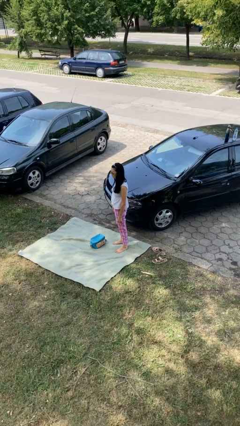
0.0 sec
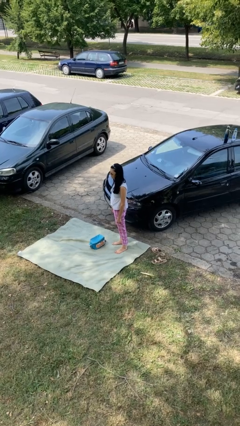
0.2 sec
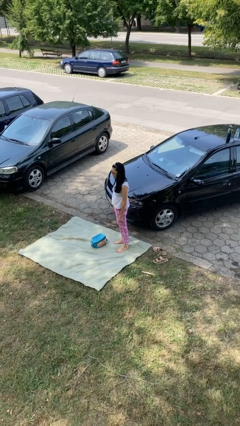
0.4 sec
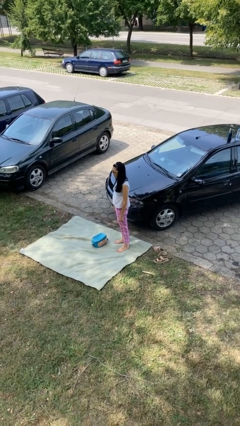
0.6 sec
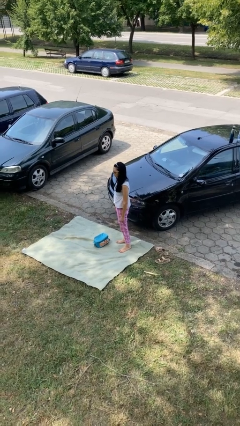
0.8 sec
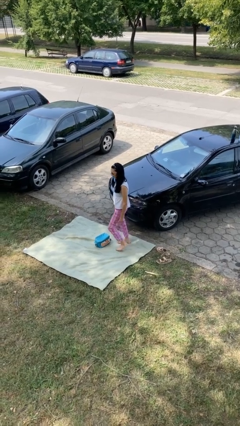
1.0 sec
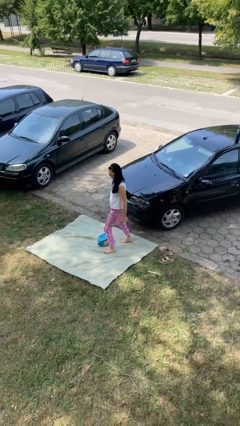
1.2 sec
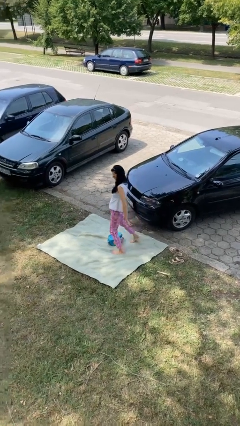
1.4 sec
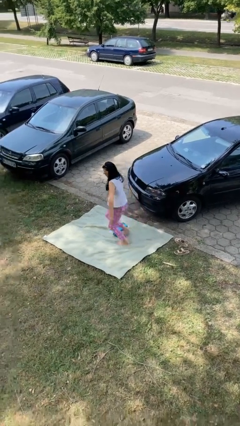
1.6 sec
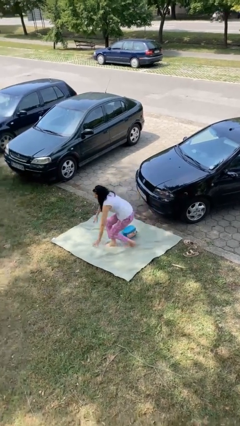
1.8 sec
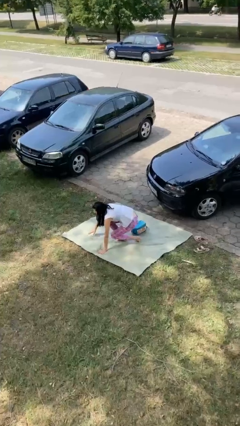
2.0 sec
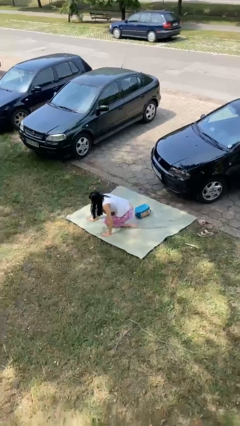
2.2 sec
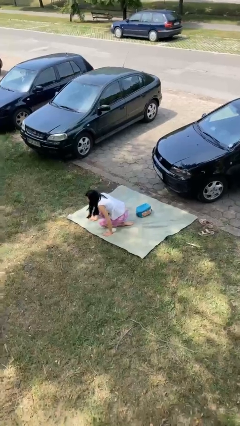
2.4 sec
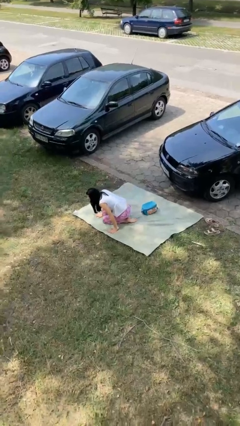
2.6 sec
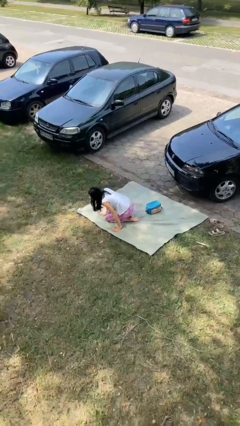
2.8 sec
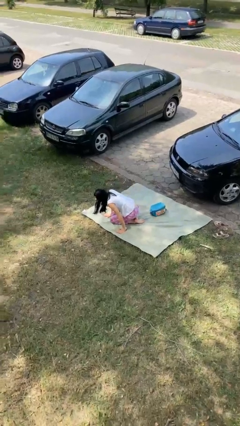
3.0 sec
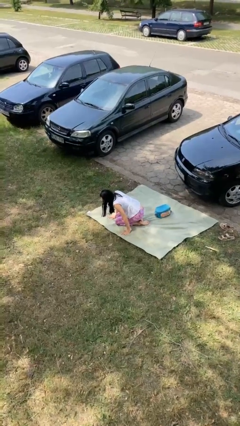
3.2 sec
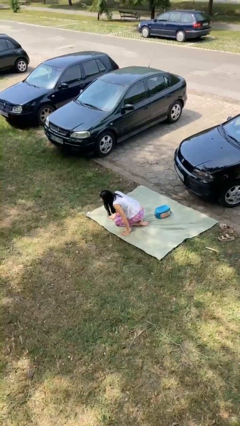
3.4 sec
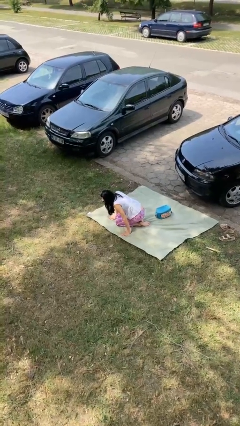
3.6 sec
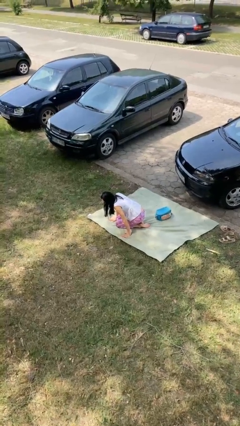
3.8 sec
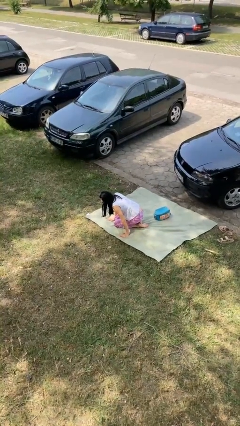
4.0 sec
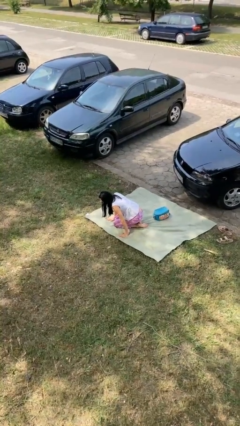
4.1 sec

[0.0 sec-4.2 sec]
person trips on object on floor

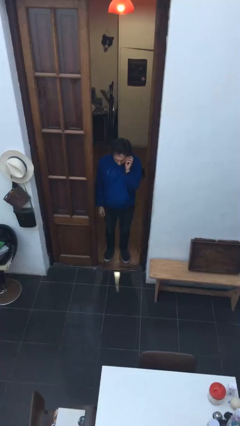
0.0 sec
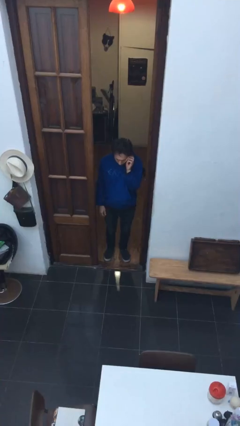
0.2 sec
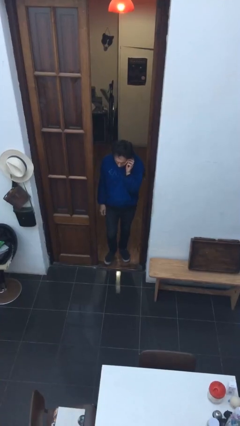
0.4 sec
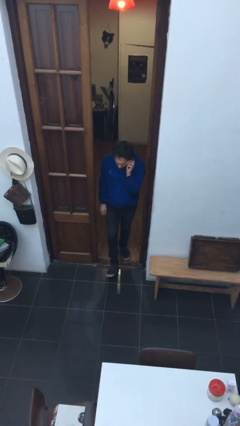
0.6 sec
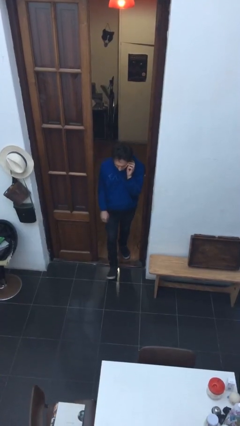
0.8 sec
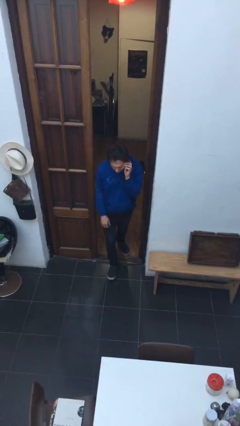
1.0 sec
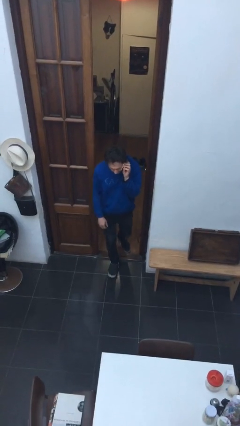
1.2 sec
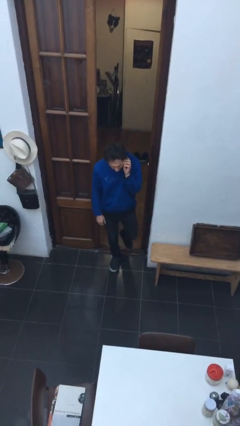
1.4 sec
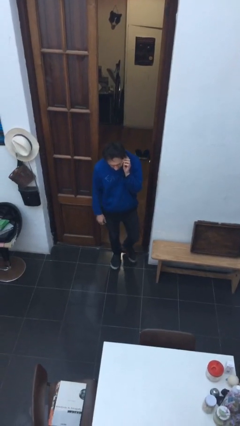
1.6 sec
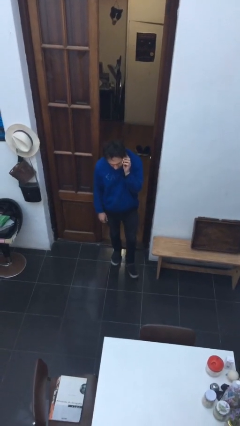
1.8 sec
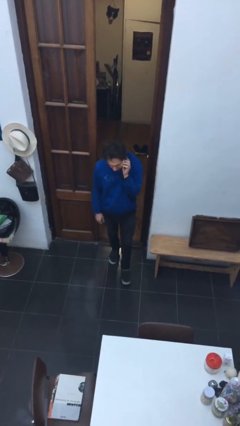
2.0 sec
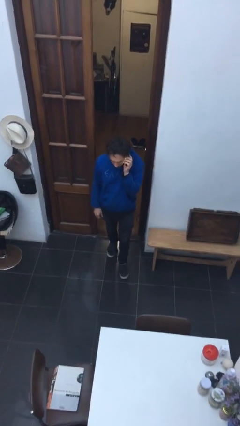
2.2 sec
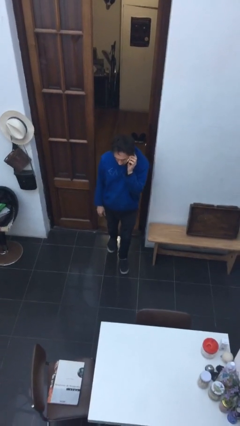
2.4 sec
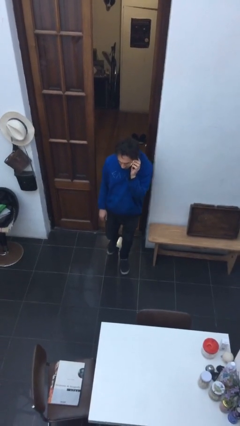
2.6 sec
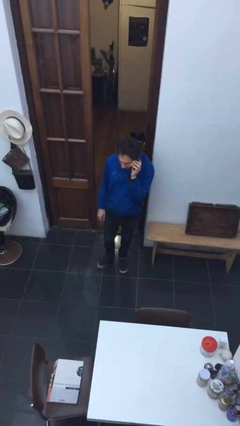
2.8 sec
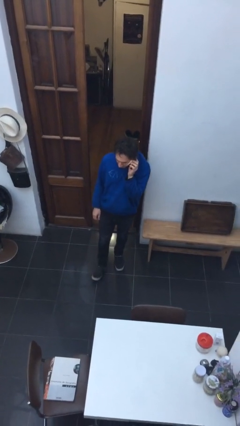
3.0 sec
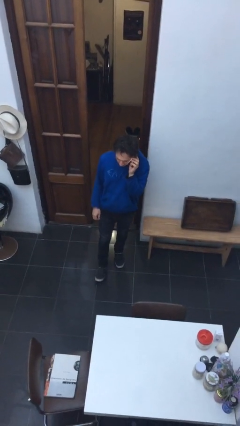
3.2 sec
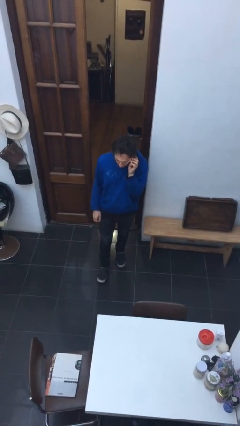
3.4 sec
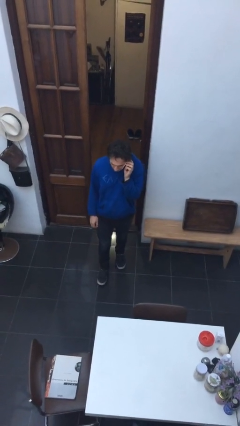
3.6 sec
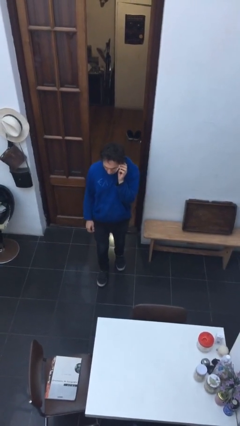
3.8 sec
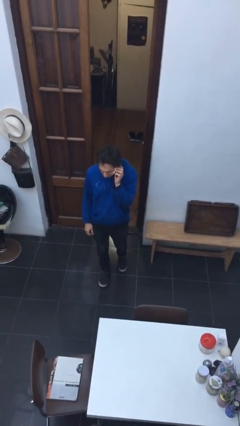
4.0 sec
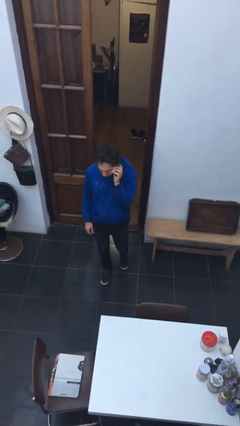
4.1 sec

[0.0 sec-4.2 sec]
person enters scene through structure

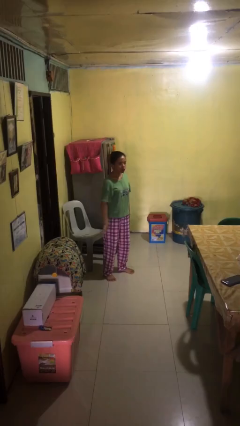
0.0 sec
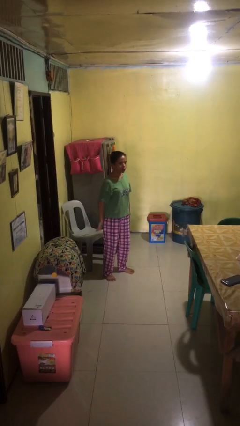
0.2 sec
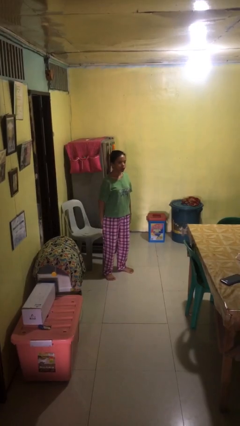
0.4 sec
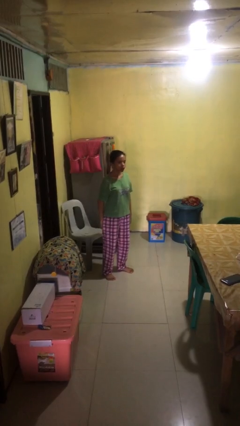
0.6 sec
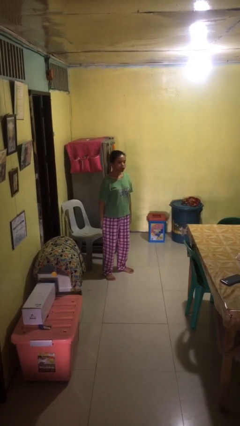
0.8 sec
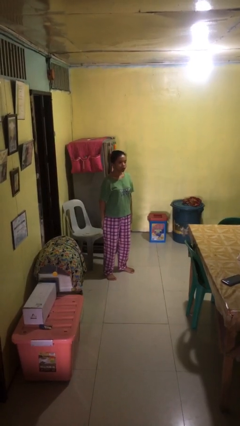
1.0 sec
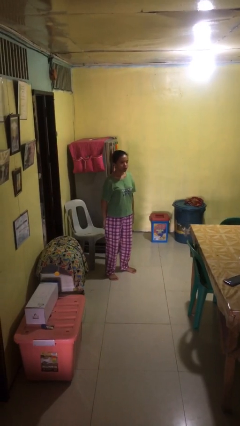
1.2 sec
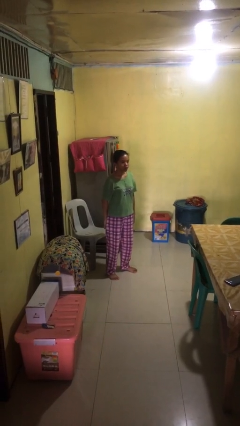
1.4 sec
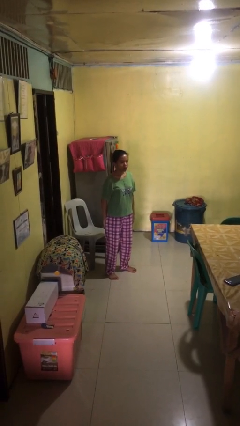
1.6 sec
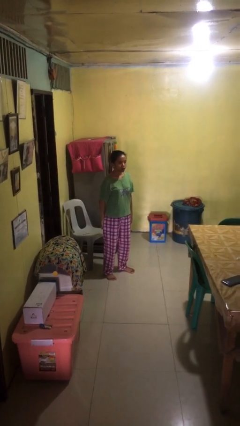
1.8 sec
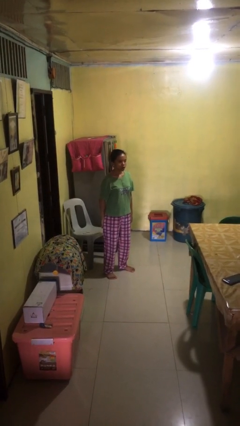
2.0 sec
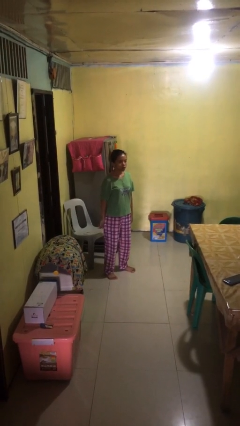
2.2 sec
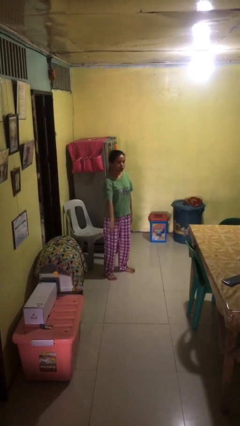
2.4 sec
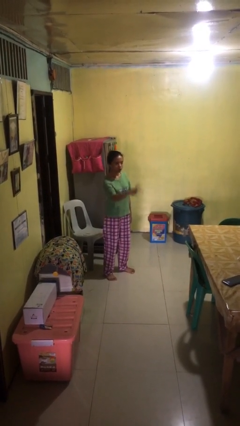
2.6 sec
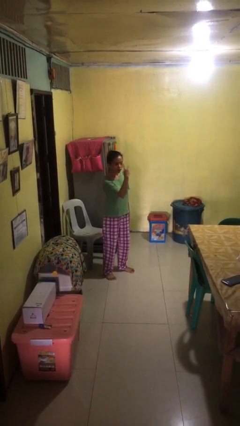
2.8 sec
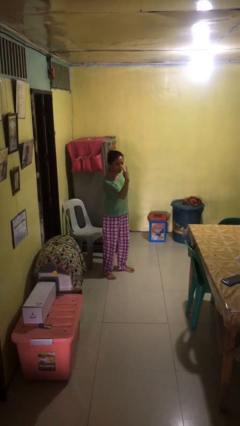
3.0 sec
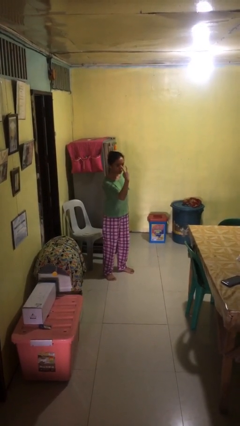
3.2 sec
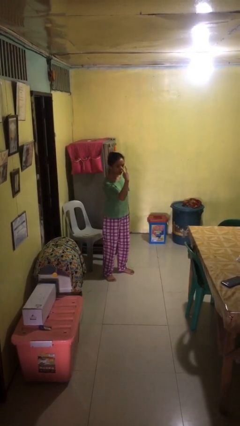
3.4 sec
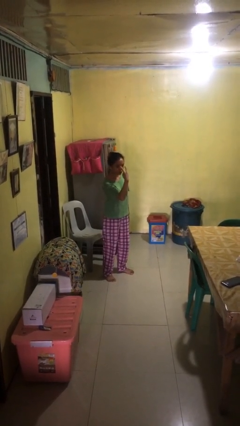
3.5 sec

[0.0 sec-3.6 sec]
person gestures watch closely

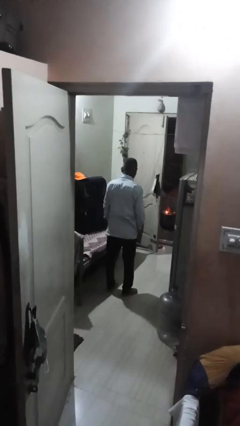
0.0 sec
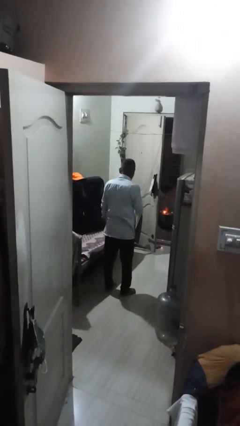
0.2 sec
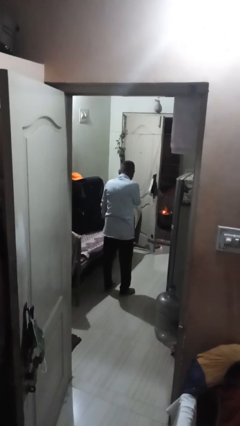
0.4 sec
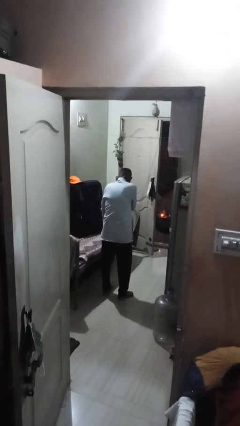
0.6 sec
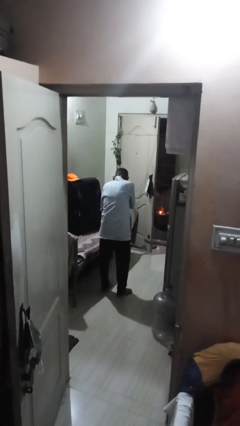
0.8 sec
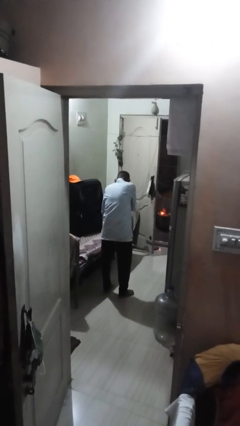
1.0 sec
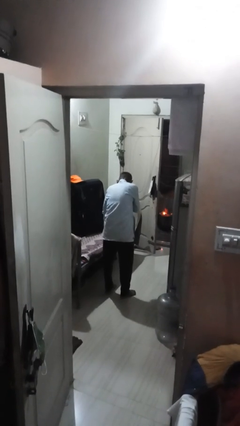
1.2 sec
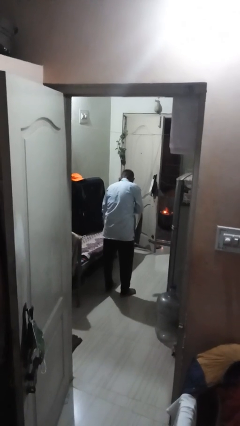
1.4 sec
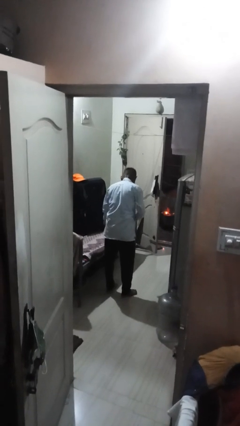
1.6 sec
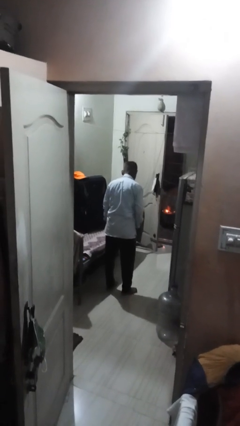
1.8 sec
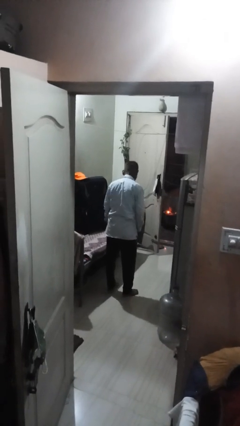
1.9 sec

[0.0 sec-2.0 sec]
person swats bug

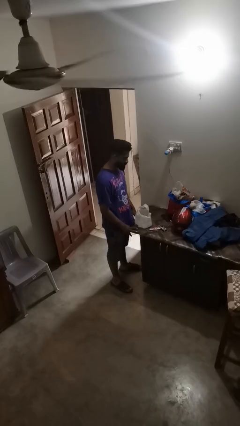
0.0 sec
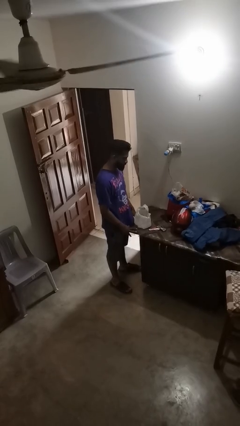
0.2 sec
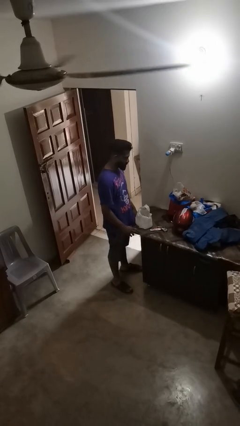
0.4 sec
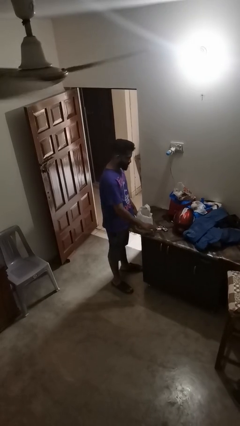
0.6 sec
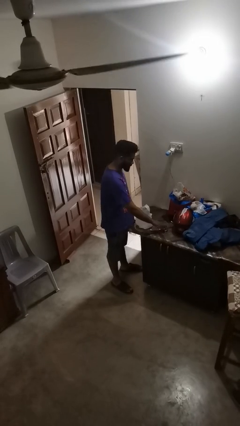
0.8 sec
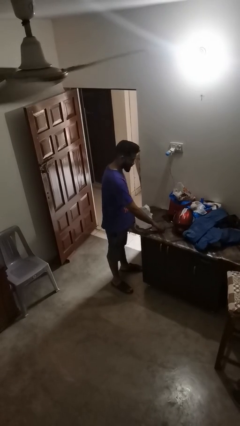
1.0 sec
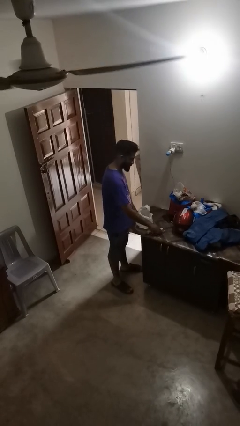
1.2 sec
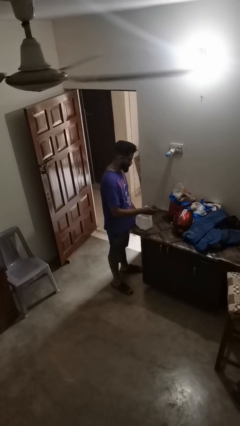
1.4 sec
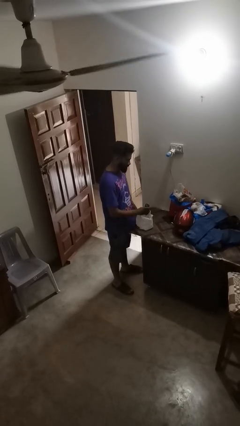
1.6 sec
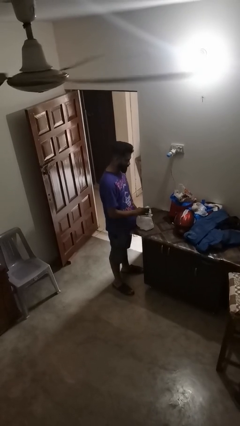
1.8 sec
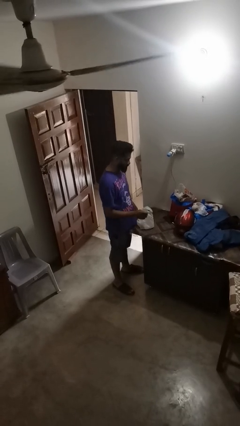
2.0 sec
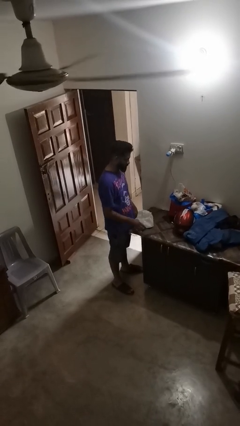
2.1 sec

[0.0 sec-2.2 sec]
person puts object into bag

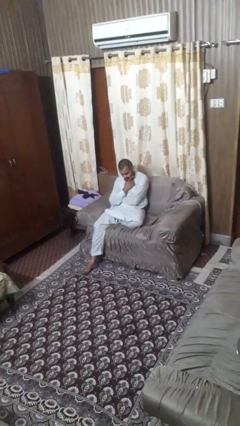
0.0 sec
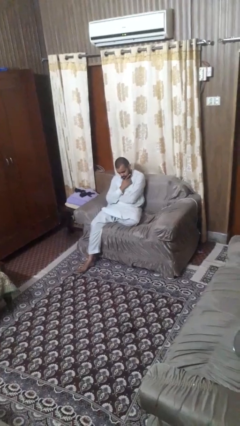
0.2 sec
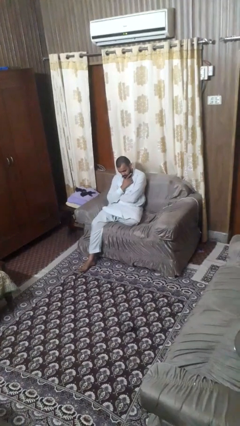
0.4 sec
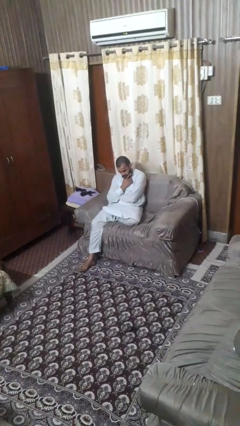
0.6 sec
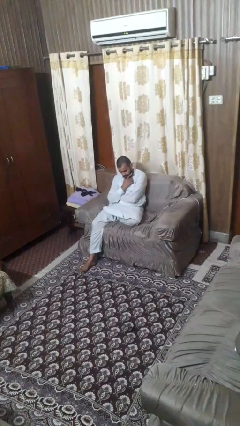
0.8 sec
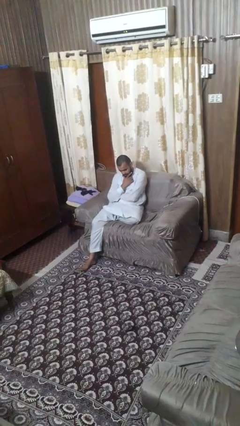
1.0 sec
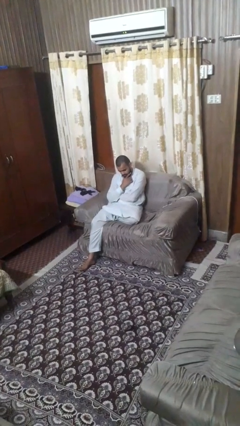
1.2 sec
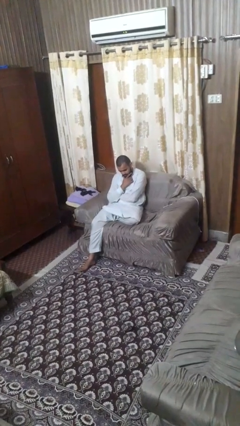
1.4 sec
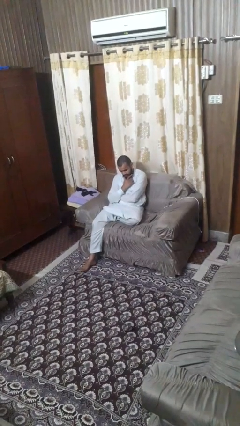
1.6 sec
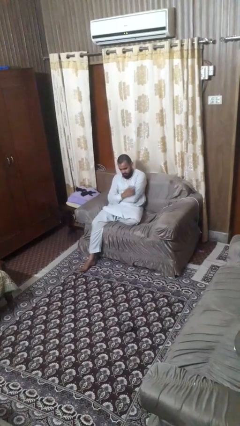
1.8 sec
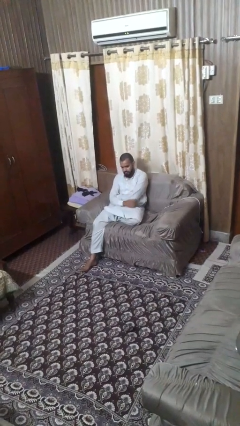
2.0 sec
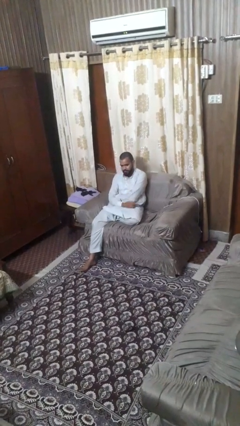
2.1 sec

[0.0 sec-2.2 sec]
person strokes chin
